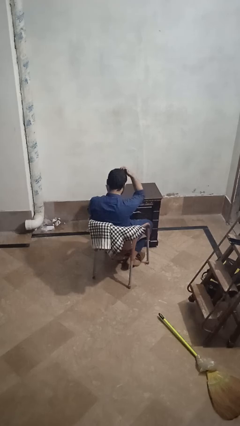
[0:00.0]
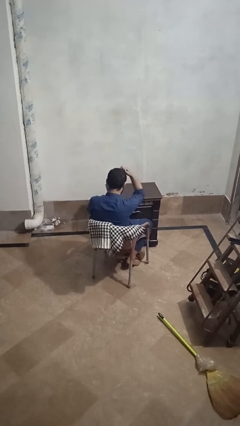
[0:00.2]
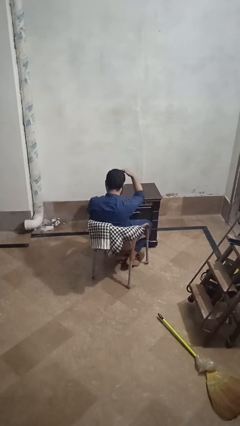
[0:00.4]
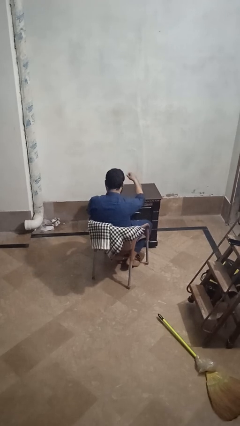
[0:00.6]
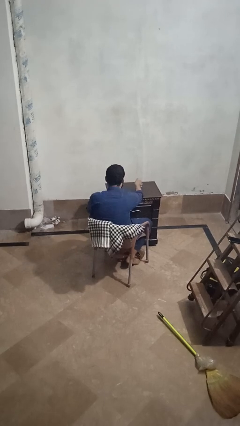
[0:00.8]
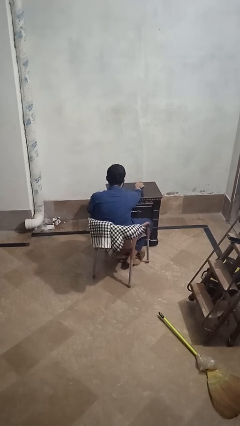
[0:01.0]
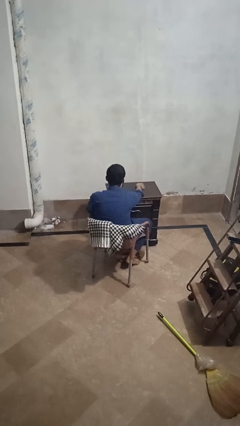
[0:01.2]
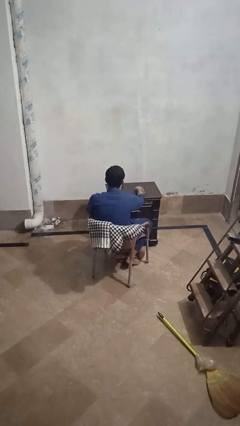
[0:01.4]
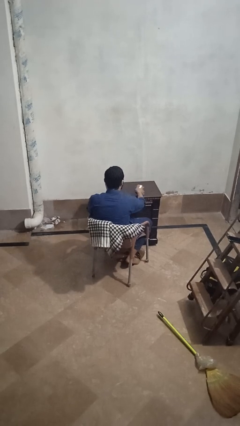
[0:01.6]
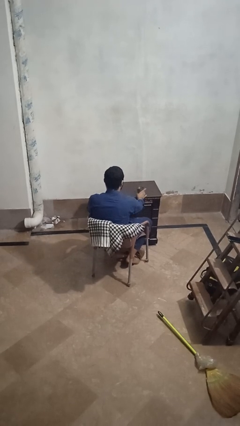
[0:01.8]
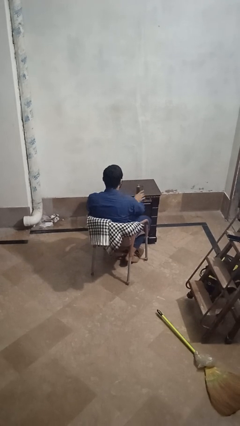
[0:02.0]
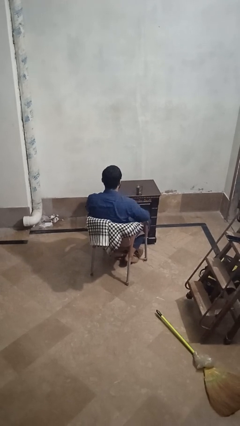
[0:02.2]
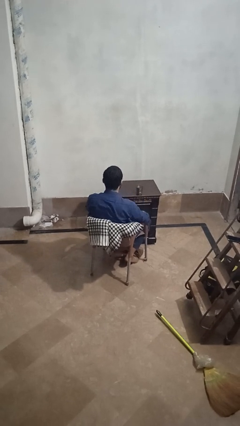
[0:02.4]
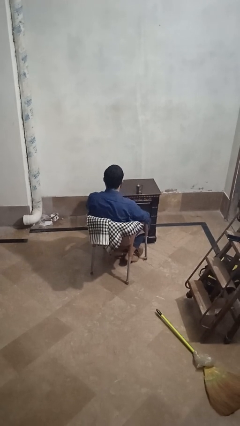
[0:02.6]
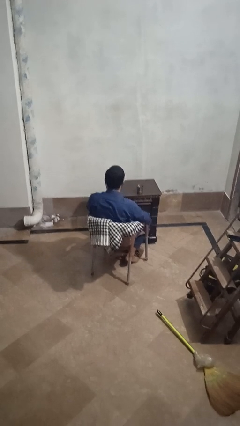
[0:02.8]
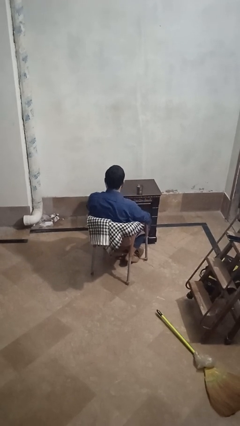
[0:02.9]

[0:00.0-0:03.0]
person sets upright glass

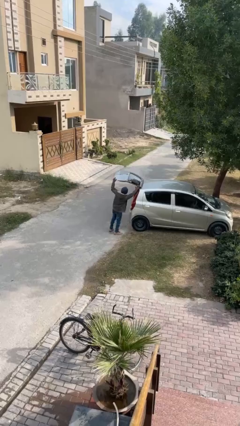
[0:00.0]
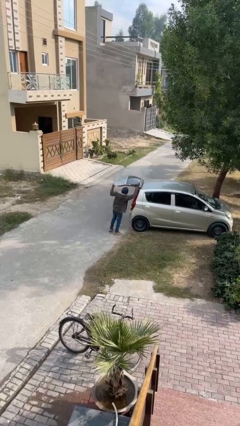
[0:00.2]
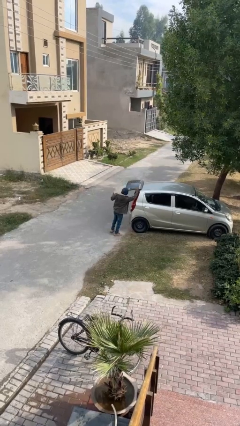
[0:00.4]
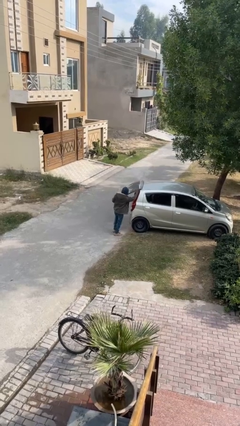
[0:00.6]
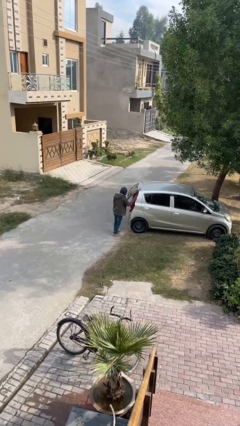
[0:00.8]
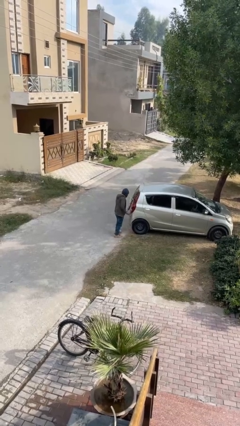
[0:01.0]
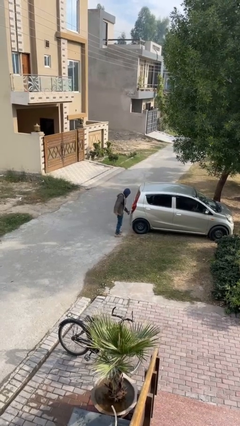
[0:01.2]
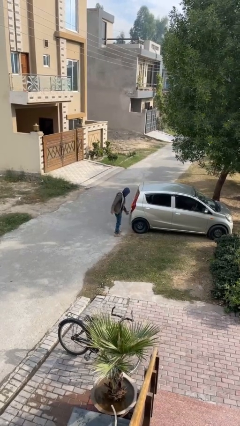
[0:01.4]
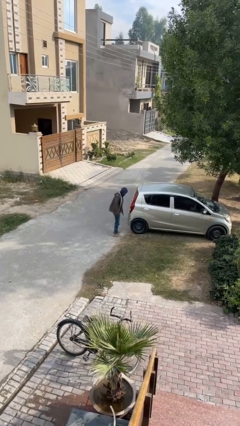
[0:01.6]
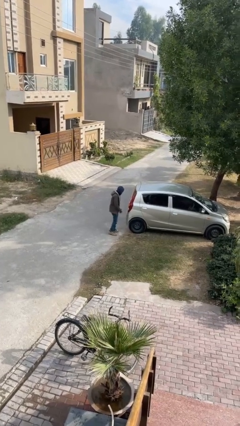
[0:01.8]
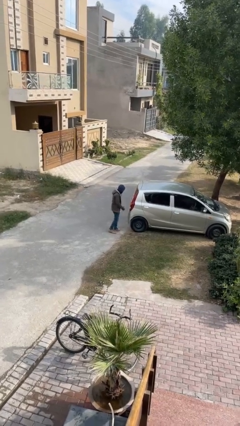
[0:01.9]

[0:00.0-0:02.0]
person closes car trunk

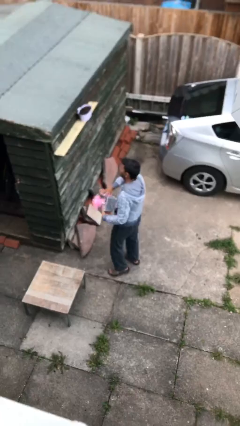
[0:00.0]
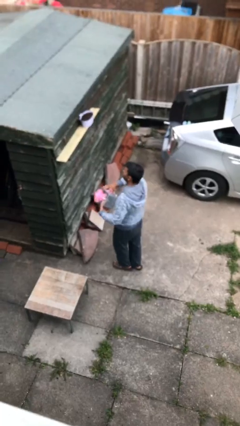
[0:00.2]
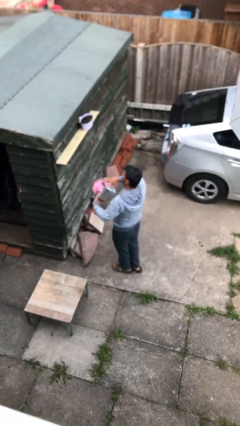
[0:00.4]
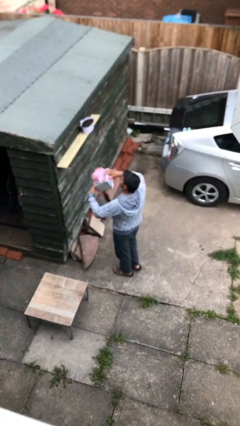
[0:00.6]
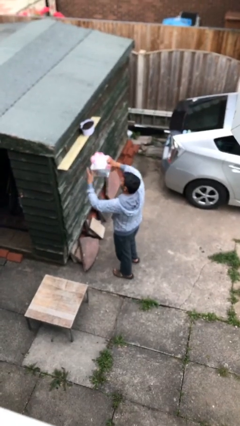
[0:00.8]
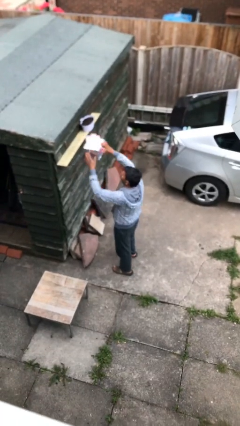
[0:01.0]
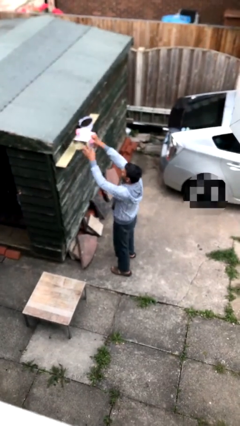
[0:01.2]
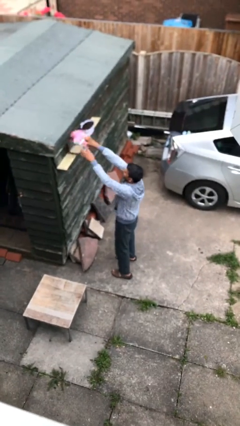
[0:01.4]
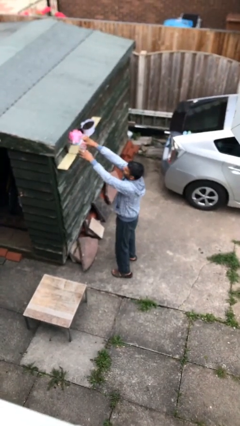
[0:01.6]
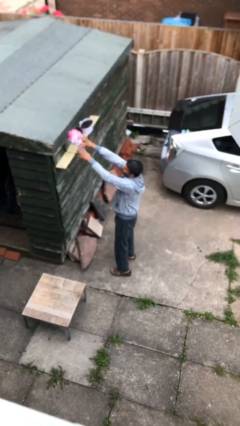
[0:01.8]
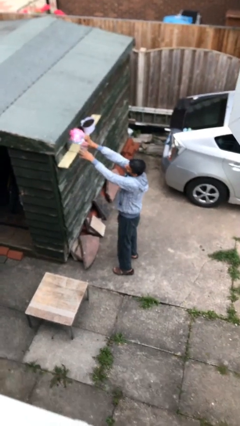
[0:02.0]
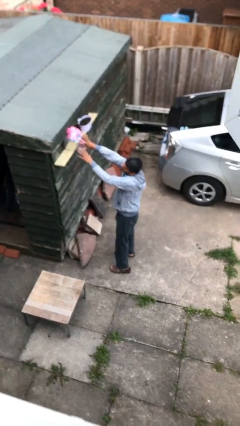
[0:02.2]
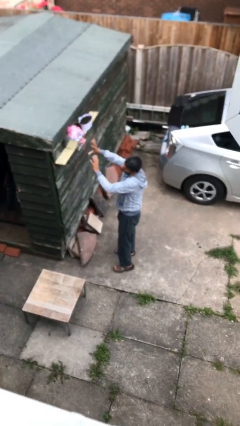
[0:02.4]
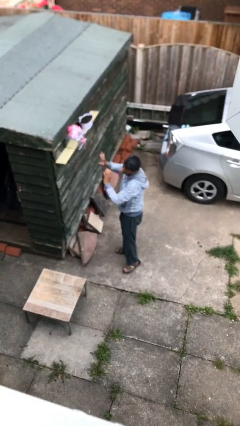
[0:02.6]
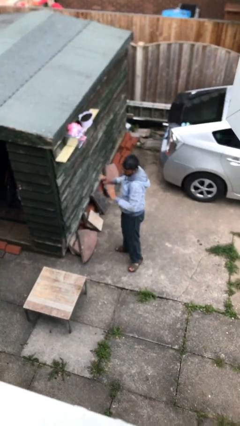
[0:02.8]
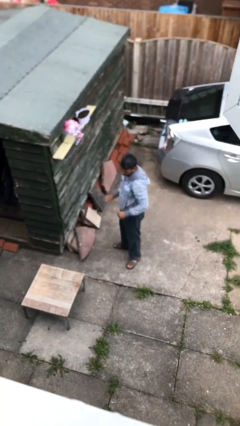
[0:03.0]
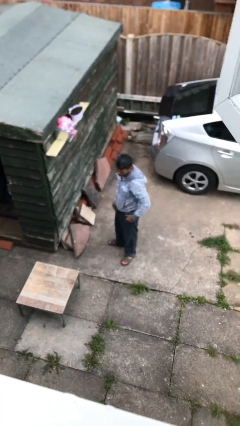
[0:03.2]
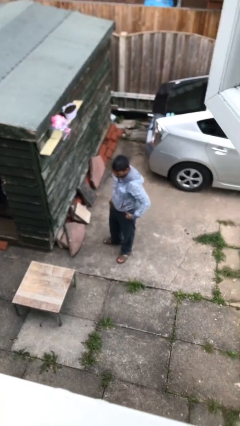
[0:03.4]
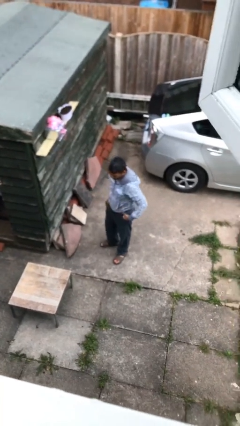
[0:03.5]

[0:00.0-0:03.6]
person puts down object on shelf

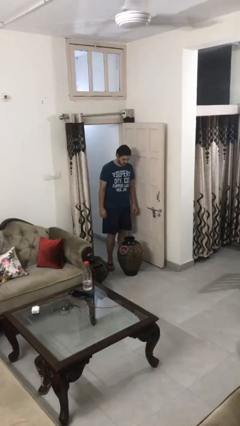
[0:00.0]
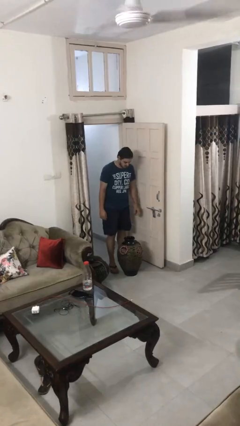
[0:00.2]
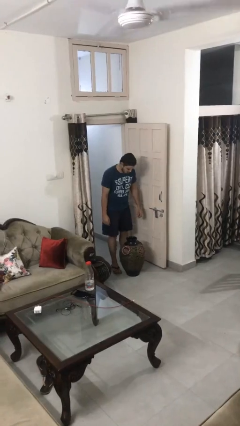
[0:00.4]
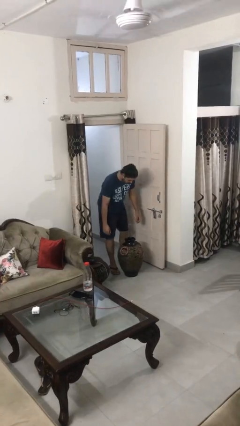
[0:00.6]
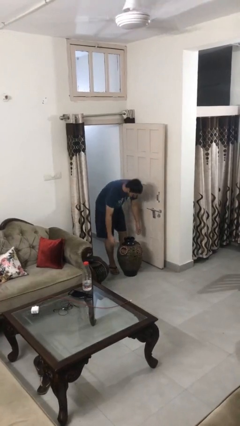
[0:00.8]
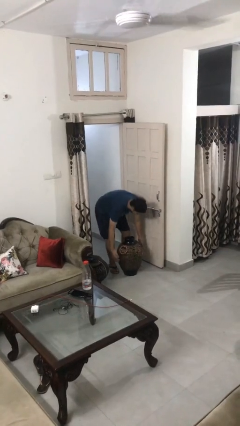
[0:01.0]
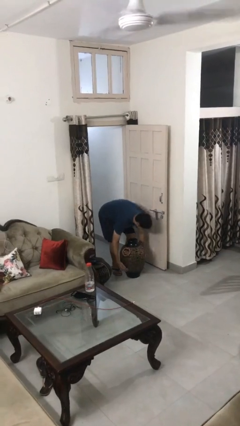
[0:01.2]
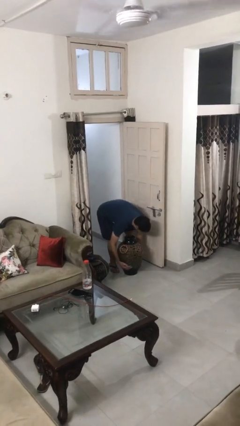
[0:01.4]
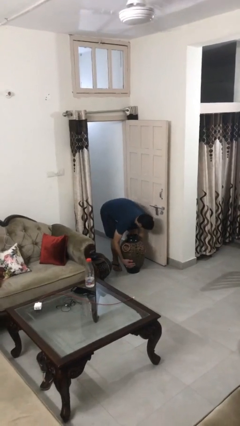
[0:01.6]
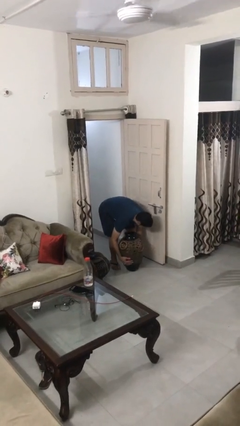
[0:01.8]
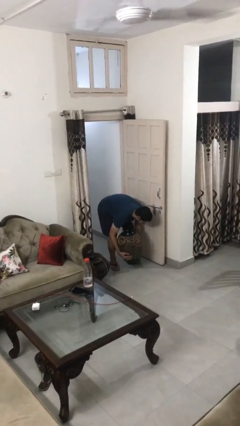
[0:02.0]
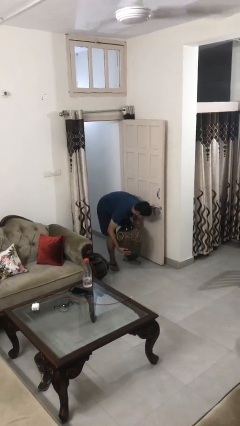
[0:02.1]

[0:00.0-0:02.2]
person picks up object from floor

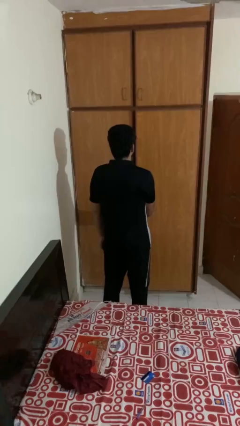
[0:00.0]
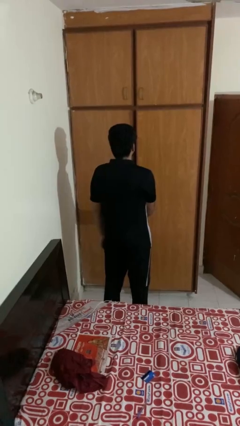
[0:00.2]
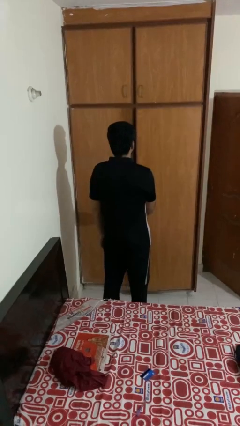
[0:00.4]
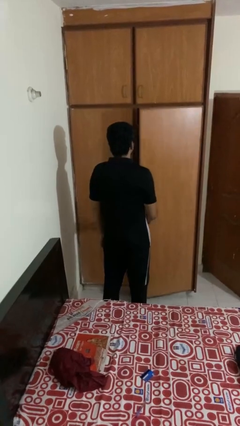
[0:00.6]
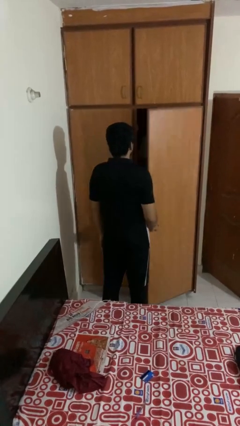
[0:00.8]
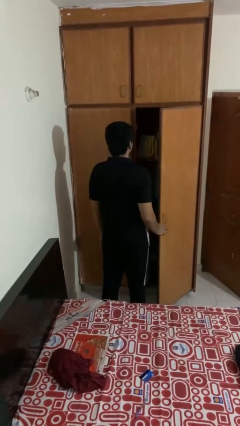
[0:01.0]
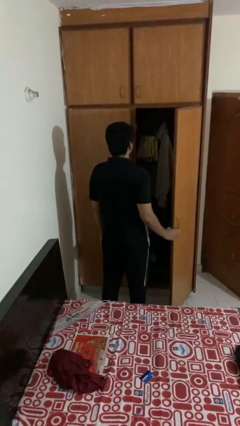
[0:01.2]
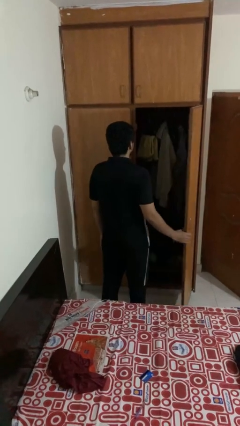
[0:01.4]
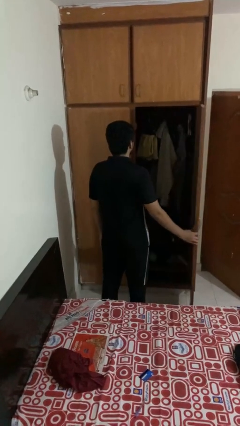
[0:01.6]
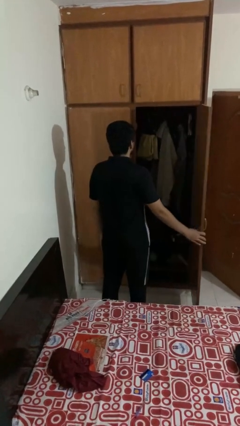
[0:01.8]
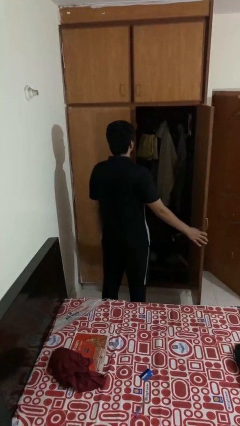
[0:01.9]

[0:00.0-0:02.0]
person opens closet door

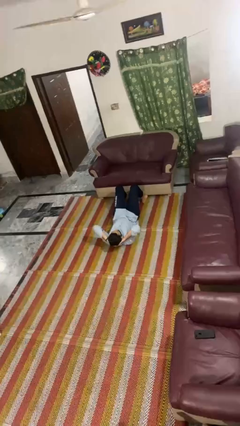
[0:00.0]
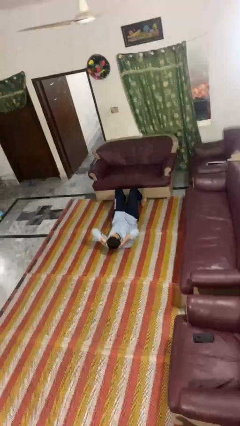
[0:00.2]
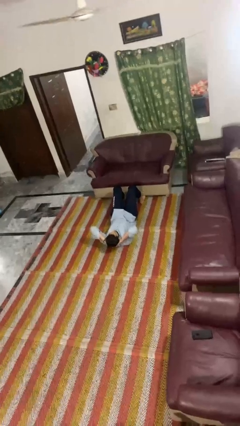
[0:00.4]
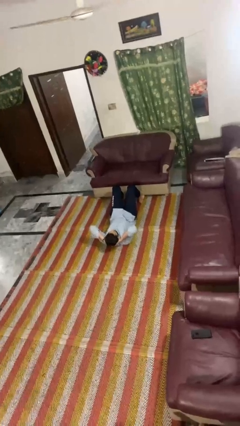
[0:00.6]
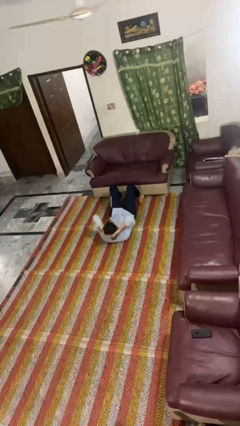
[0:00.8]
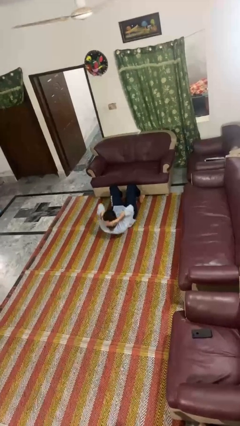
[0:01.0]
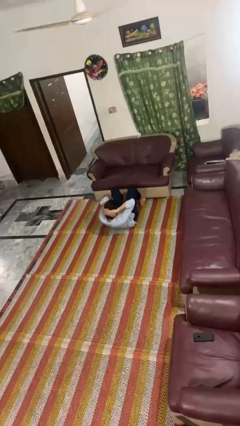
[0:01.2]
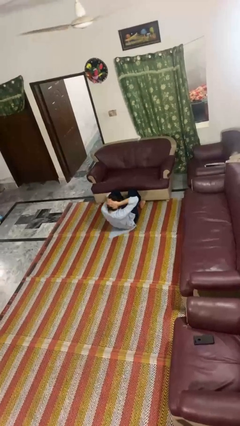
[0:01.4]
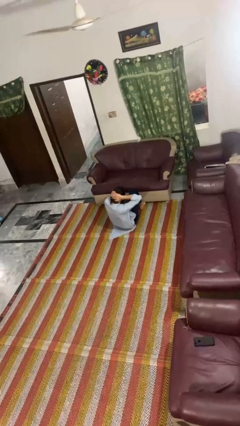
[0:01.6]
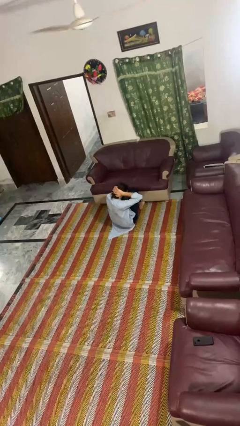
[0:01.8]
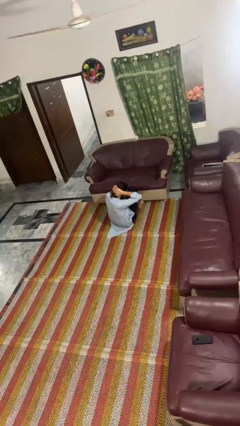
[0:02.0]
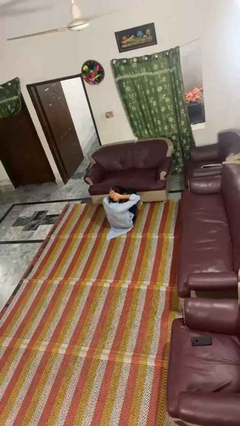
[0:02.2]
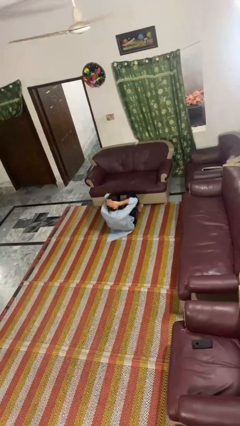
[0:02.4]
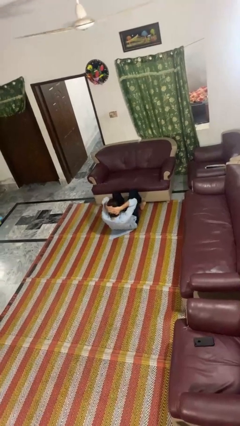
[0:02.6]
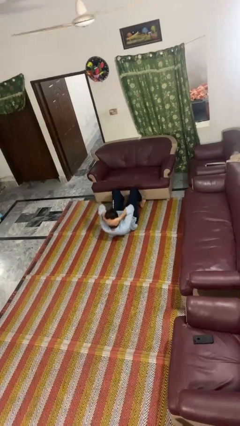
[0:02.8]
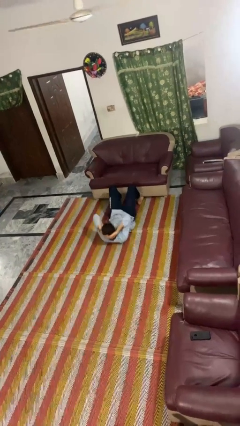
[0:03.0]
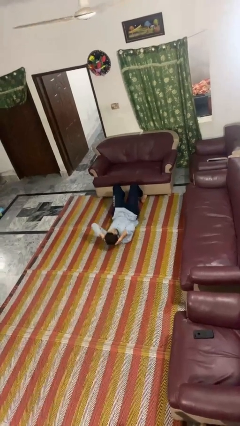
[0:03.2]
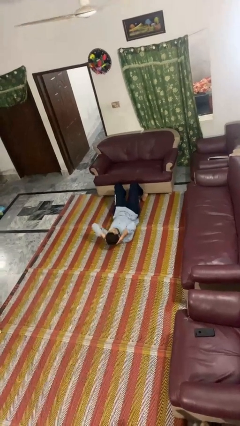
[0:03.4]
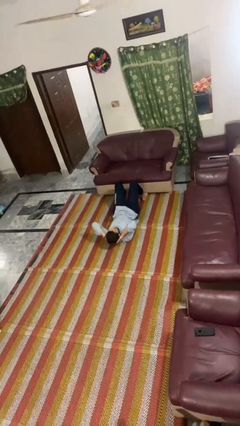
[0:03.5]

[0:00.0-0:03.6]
person exercises with situp

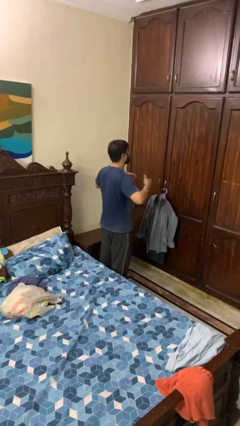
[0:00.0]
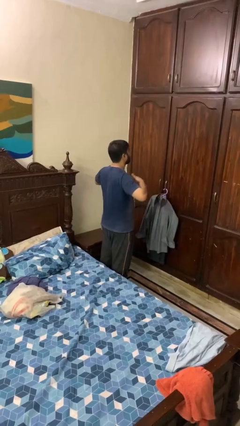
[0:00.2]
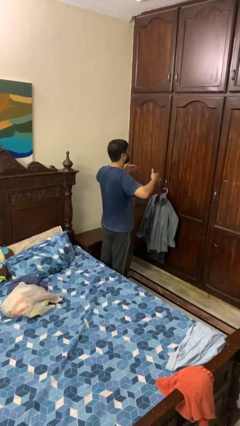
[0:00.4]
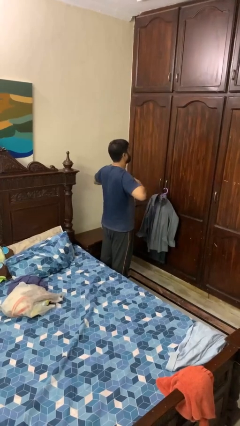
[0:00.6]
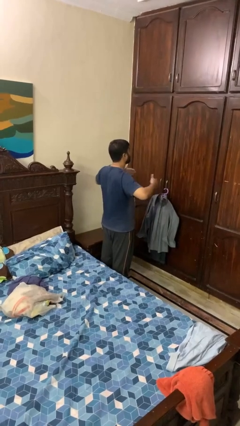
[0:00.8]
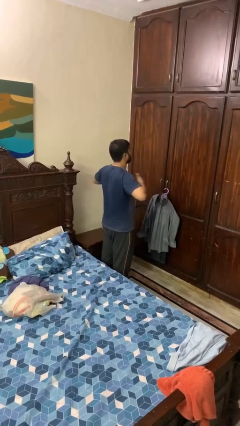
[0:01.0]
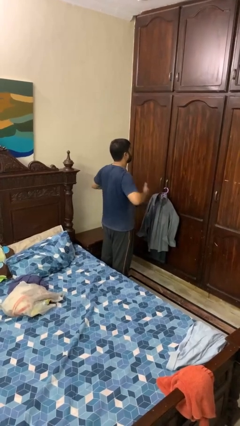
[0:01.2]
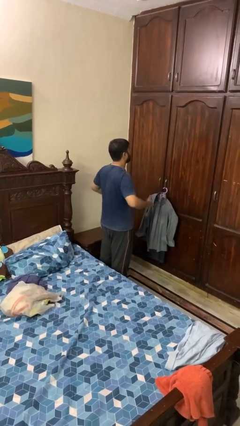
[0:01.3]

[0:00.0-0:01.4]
person drums on chest
